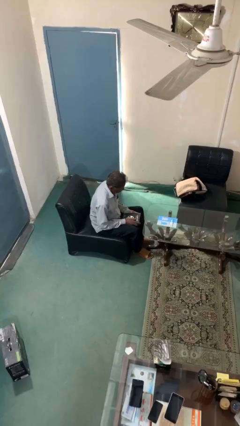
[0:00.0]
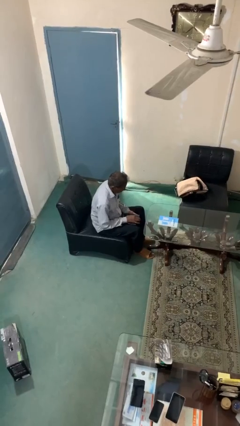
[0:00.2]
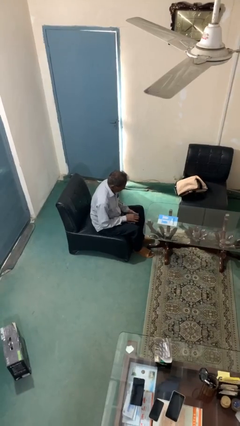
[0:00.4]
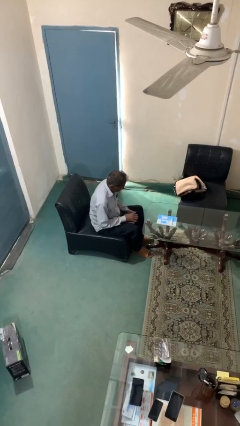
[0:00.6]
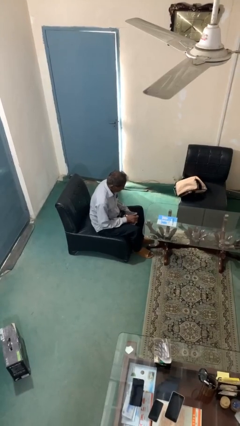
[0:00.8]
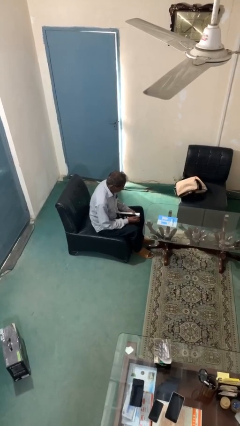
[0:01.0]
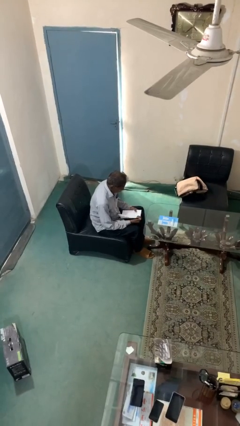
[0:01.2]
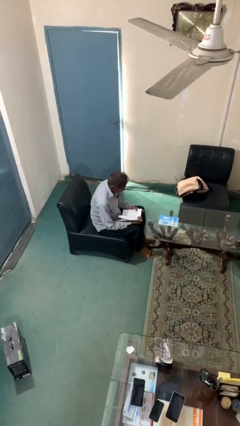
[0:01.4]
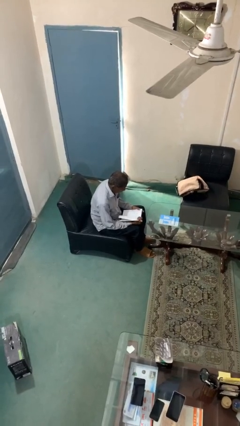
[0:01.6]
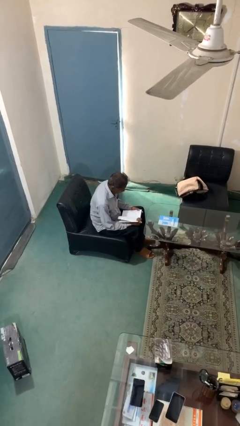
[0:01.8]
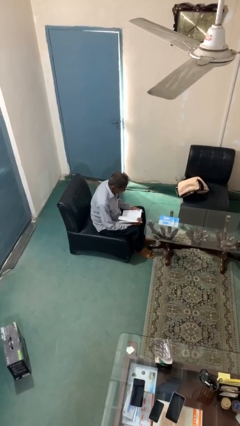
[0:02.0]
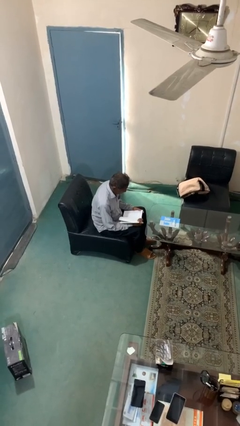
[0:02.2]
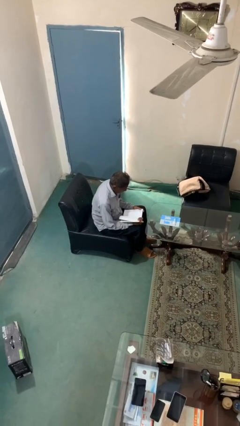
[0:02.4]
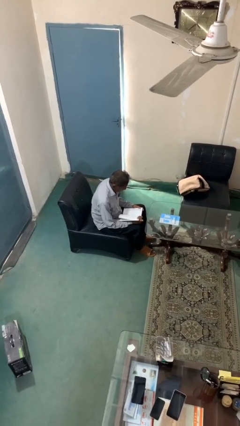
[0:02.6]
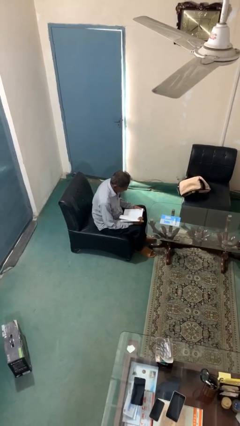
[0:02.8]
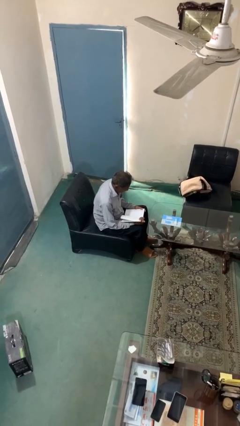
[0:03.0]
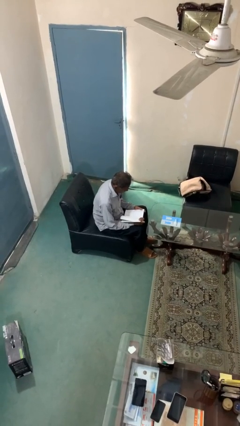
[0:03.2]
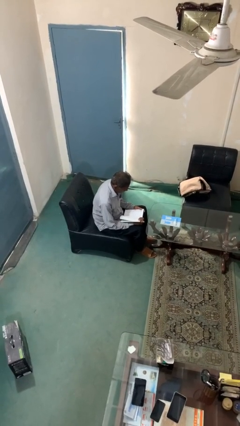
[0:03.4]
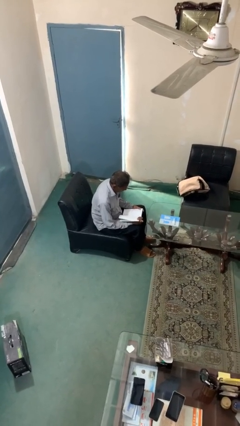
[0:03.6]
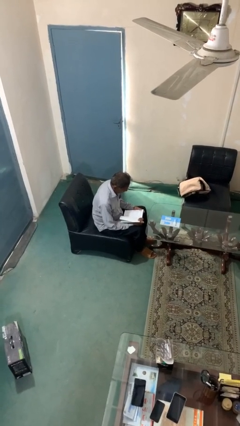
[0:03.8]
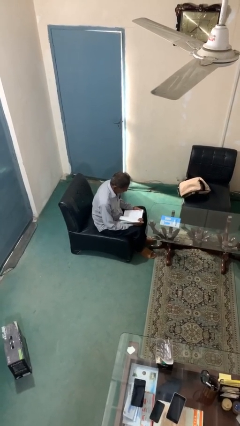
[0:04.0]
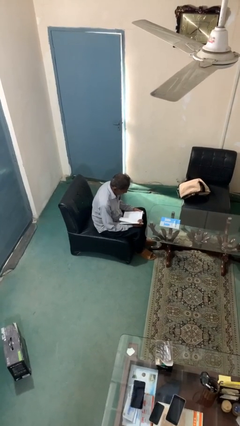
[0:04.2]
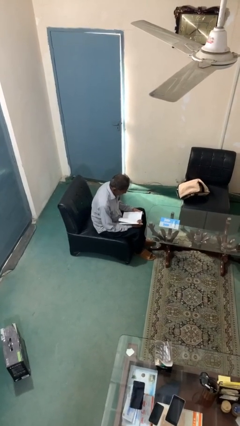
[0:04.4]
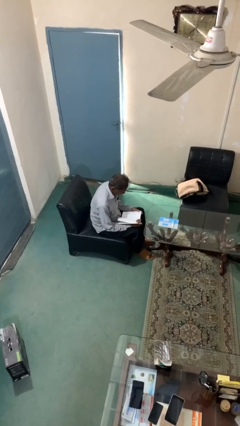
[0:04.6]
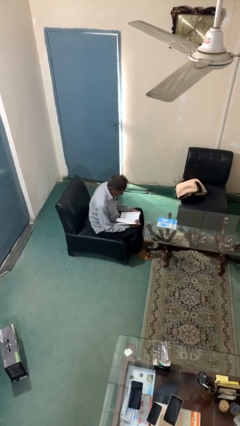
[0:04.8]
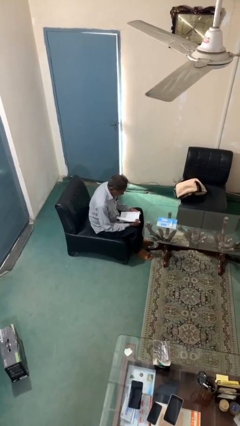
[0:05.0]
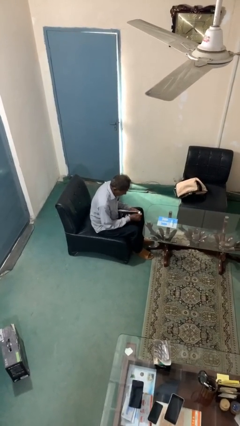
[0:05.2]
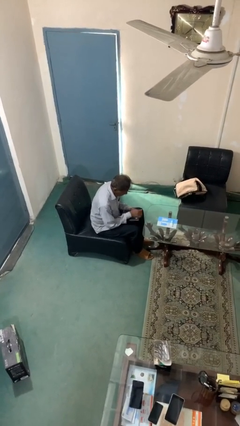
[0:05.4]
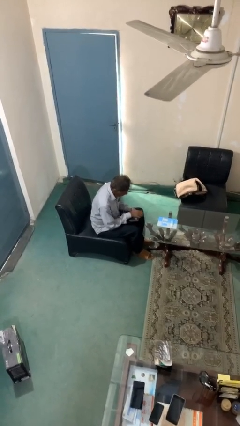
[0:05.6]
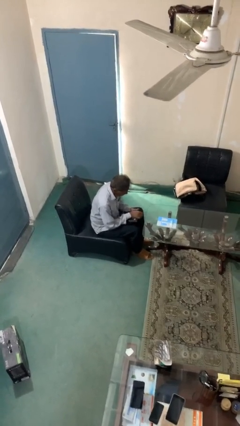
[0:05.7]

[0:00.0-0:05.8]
person reads document

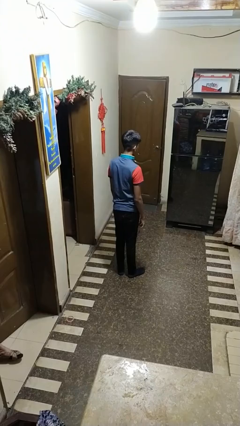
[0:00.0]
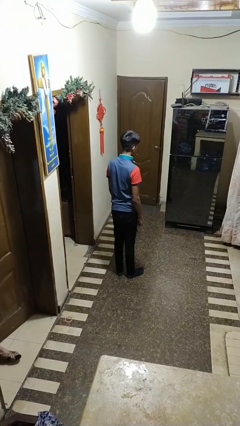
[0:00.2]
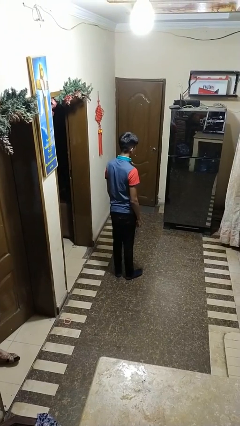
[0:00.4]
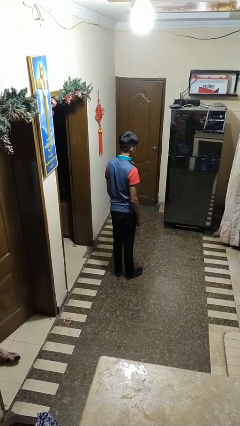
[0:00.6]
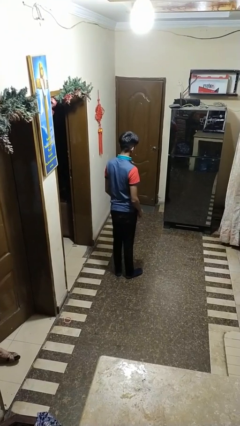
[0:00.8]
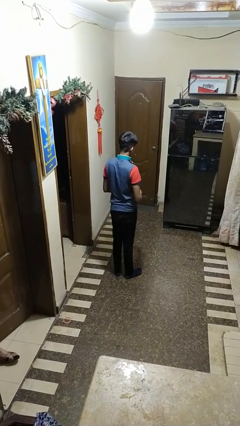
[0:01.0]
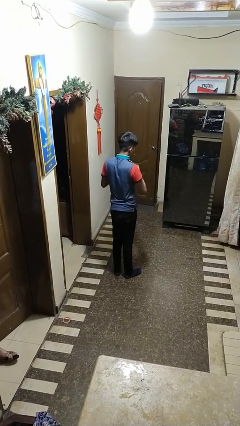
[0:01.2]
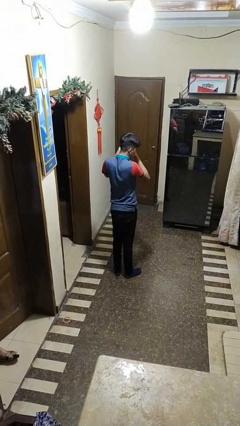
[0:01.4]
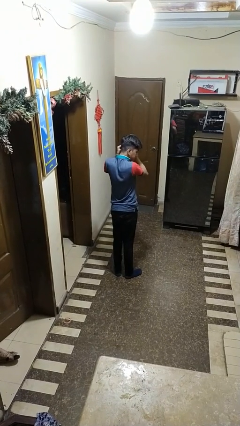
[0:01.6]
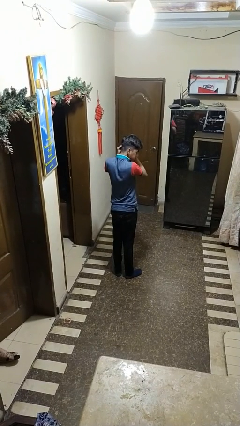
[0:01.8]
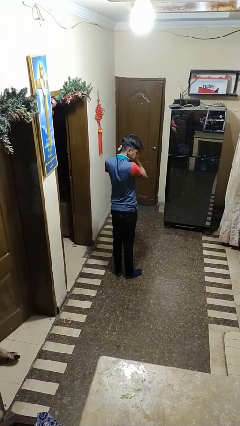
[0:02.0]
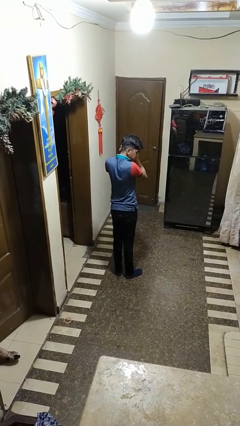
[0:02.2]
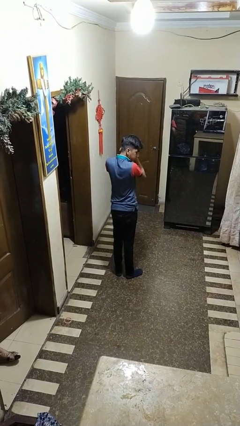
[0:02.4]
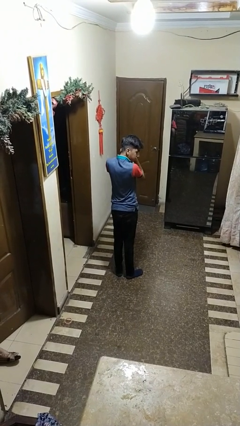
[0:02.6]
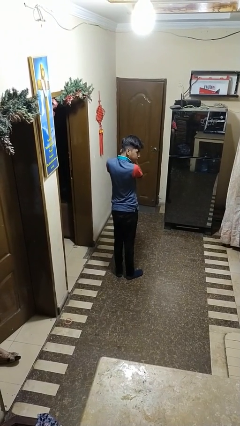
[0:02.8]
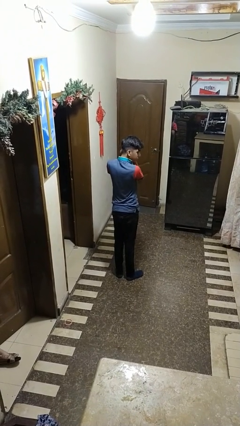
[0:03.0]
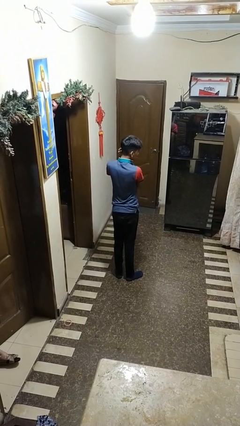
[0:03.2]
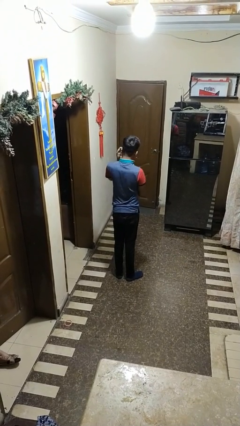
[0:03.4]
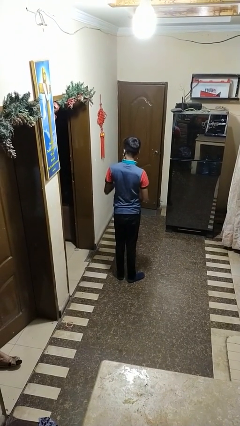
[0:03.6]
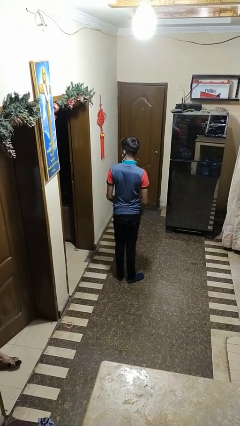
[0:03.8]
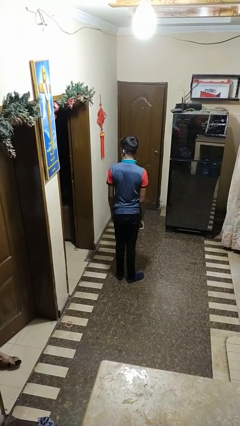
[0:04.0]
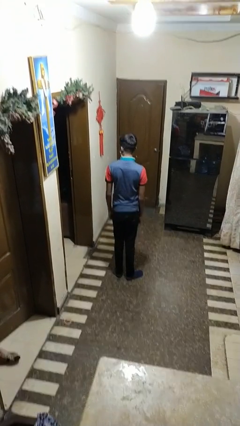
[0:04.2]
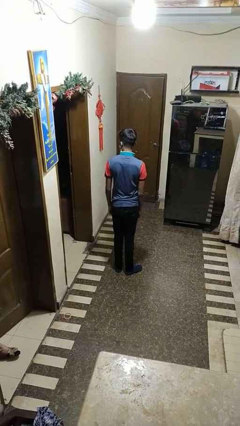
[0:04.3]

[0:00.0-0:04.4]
person puts on earrings

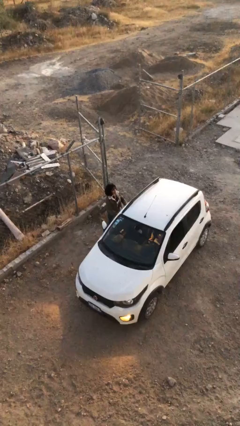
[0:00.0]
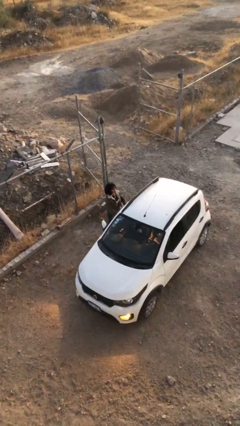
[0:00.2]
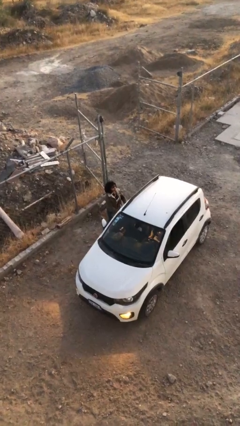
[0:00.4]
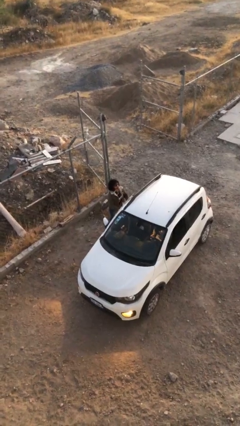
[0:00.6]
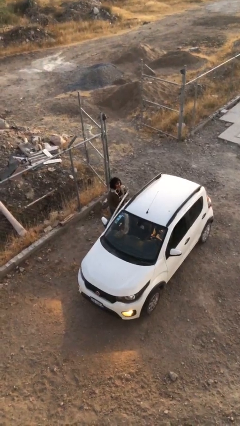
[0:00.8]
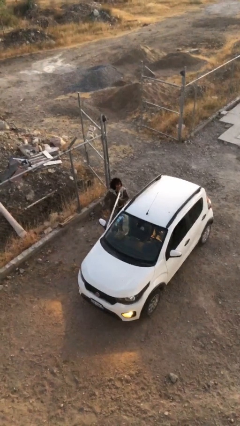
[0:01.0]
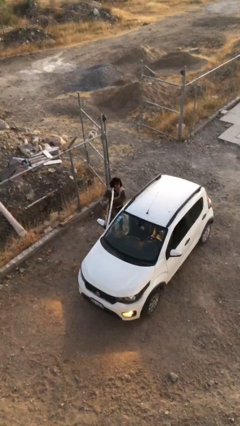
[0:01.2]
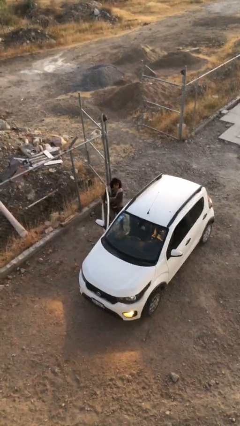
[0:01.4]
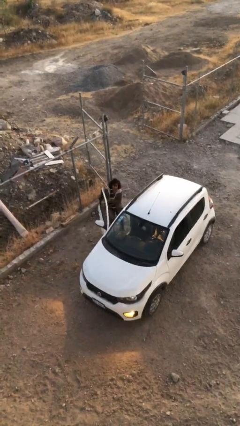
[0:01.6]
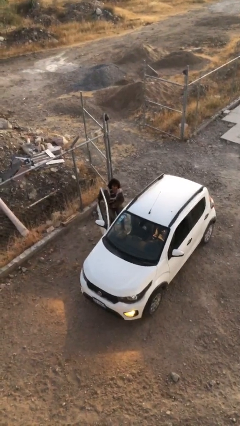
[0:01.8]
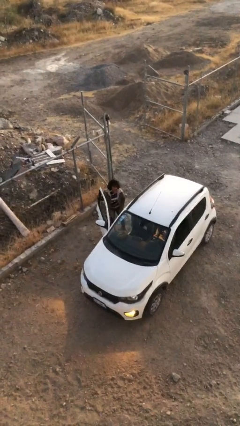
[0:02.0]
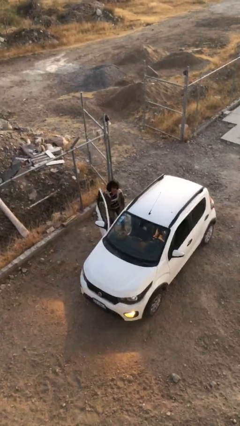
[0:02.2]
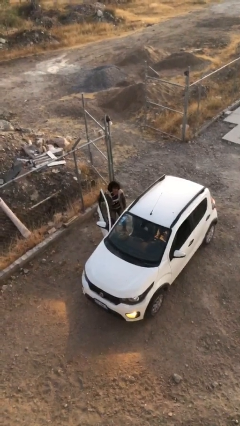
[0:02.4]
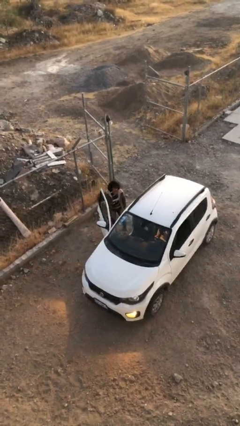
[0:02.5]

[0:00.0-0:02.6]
person opens car door

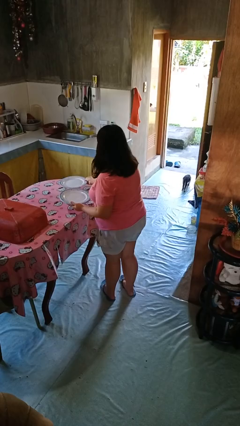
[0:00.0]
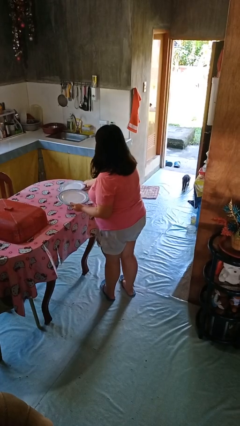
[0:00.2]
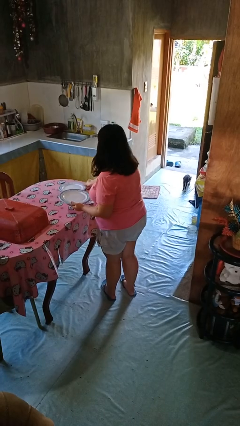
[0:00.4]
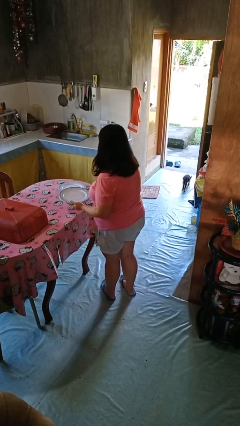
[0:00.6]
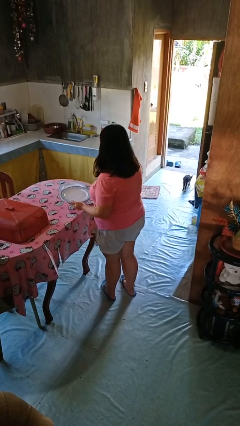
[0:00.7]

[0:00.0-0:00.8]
person sets table

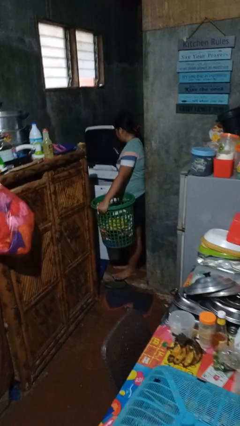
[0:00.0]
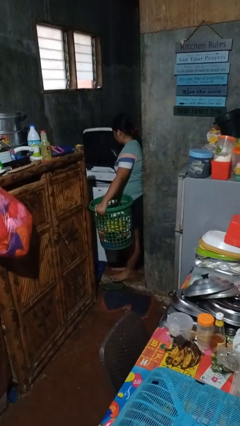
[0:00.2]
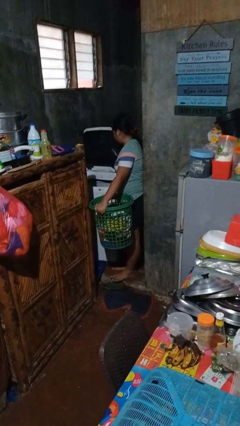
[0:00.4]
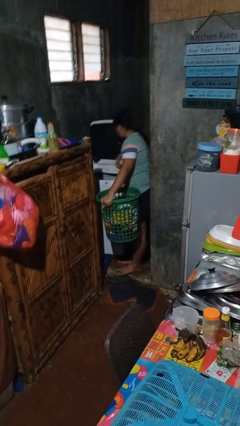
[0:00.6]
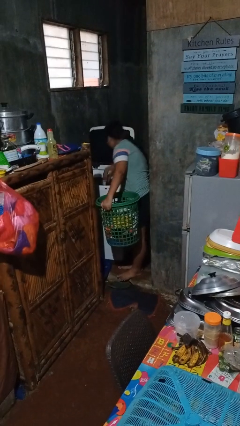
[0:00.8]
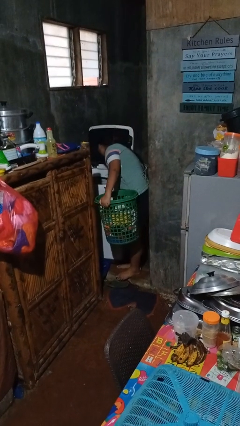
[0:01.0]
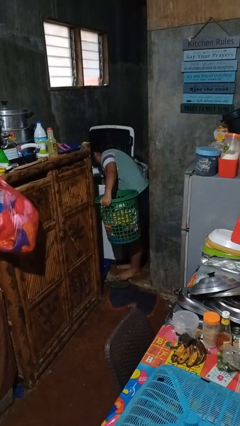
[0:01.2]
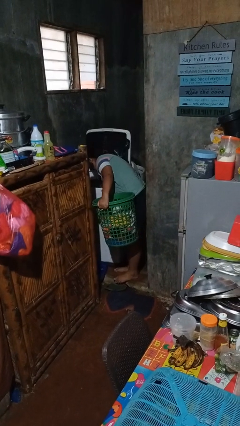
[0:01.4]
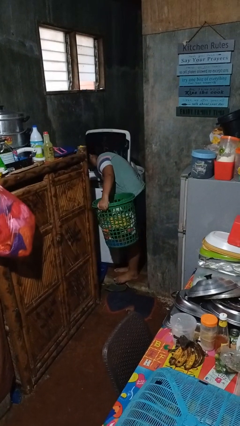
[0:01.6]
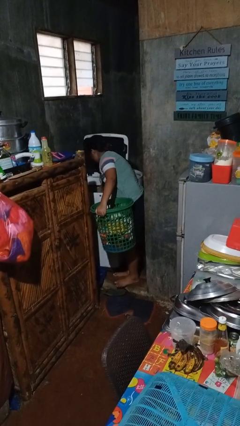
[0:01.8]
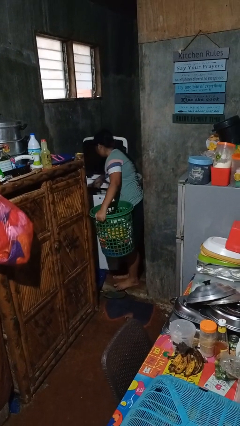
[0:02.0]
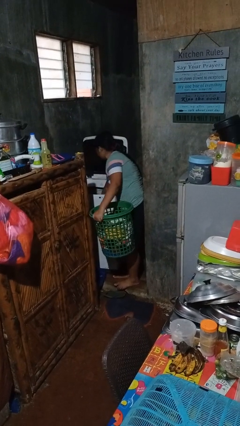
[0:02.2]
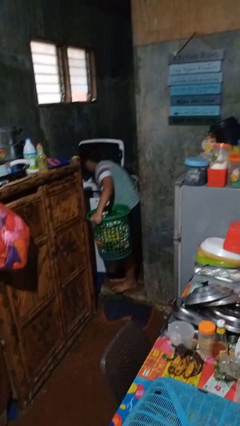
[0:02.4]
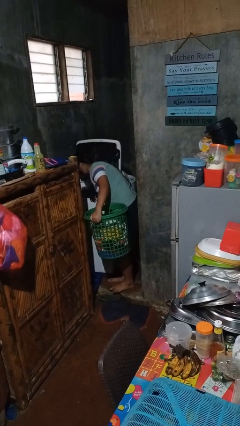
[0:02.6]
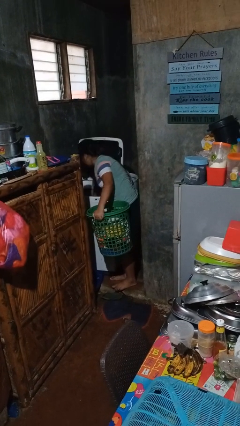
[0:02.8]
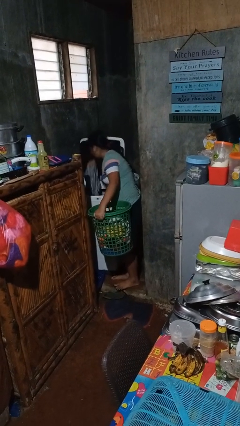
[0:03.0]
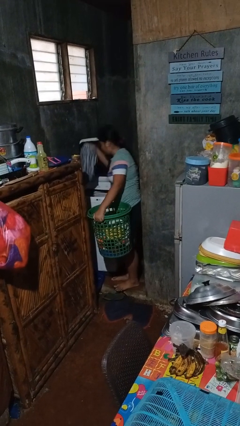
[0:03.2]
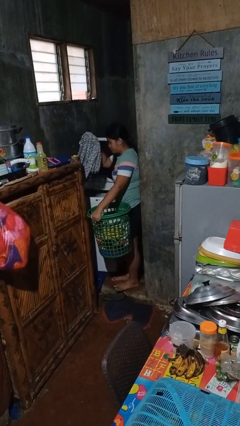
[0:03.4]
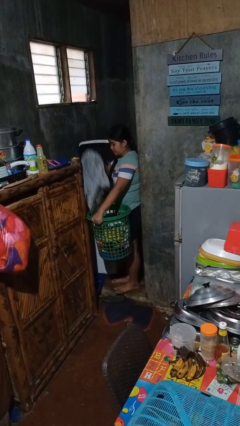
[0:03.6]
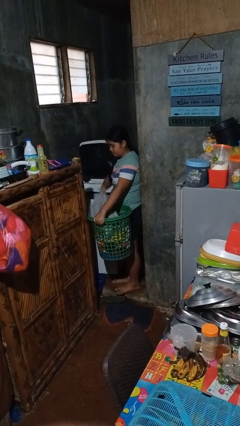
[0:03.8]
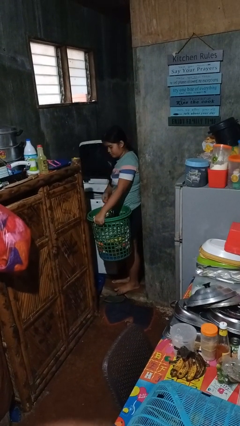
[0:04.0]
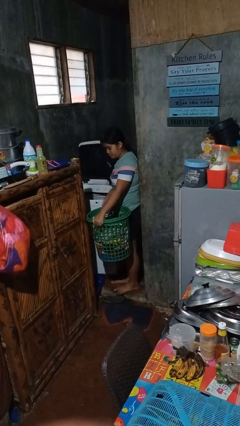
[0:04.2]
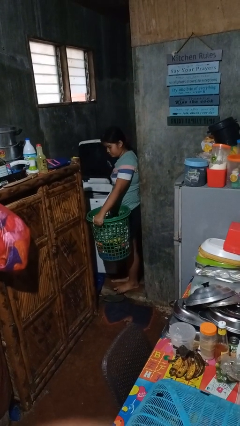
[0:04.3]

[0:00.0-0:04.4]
person unloads clotheswasher
